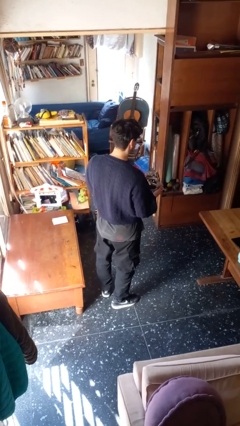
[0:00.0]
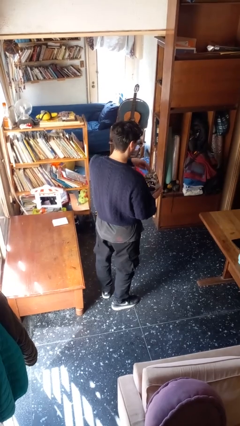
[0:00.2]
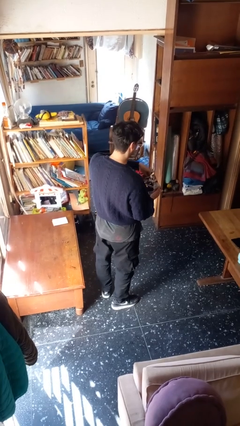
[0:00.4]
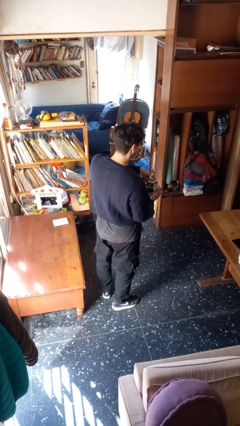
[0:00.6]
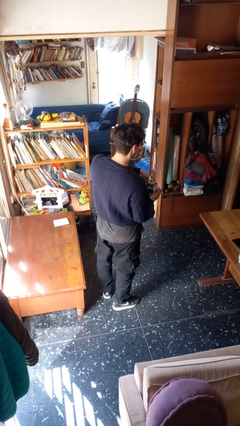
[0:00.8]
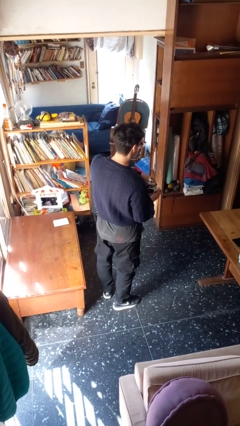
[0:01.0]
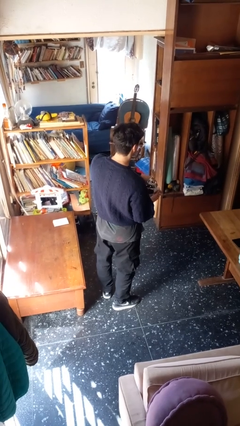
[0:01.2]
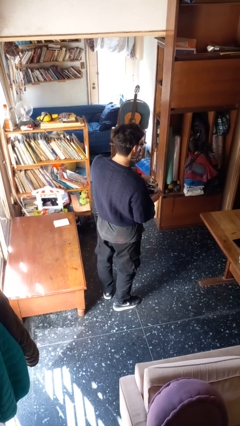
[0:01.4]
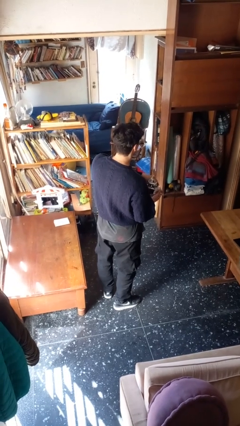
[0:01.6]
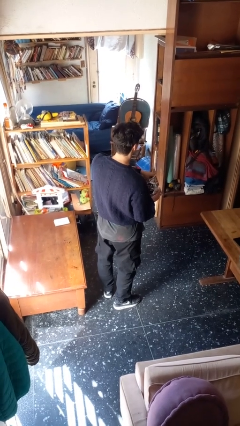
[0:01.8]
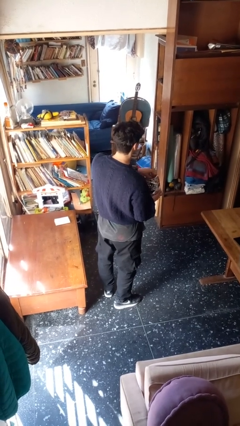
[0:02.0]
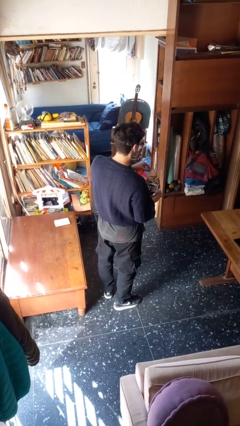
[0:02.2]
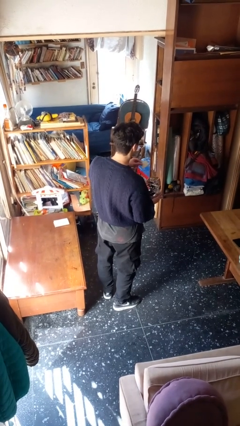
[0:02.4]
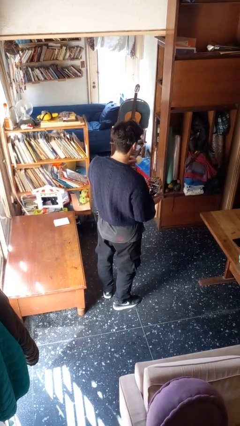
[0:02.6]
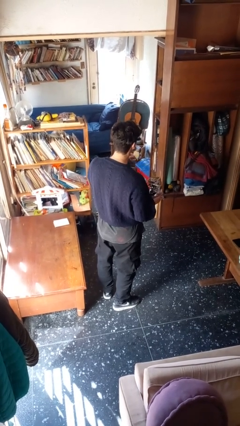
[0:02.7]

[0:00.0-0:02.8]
person eats snack from bag

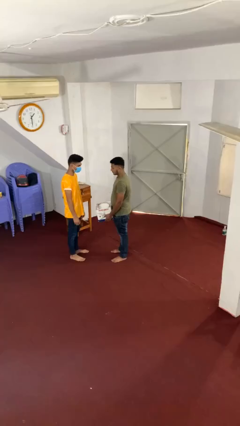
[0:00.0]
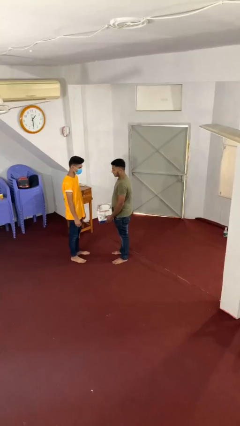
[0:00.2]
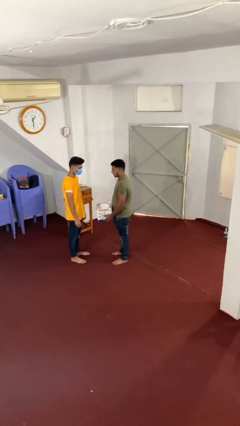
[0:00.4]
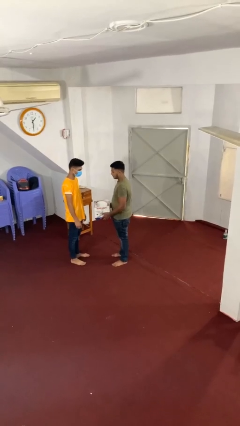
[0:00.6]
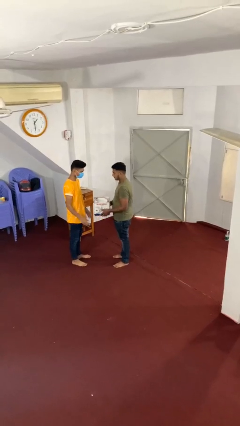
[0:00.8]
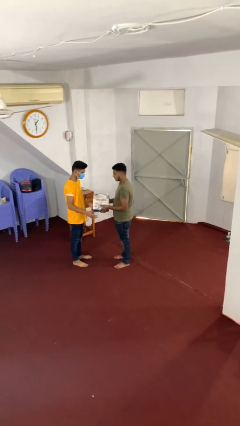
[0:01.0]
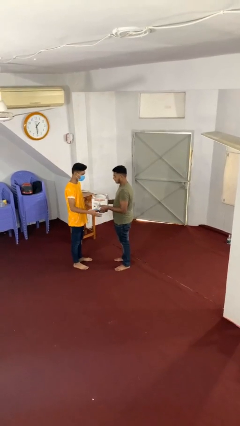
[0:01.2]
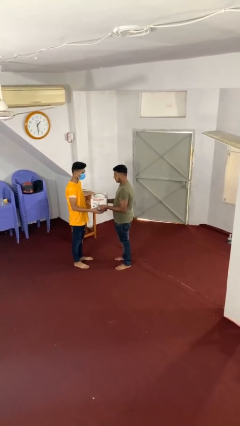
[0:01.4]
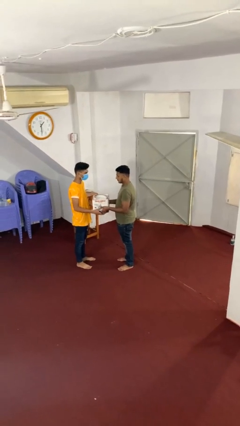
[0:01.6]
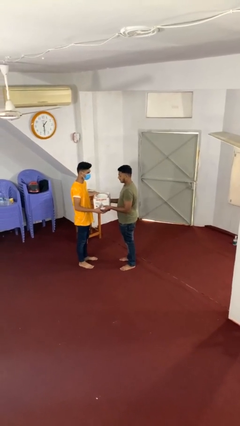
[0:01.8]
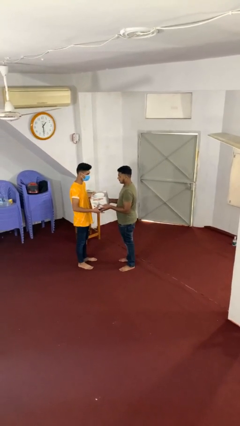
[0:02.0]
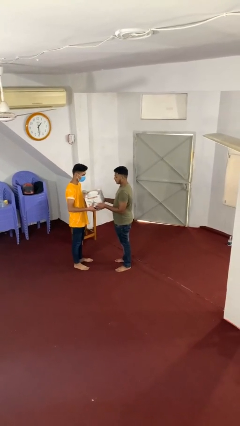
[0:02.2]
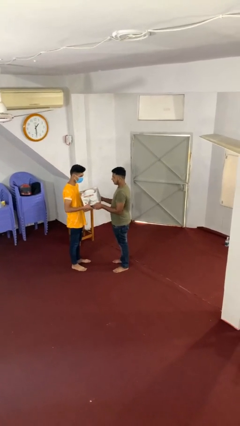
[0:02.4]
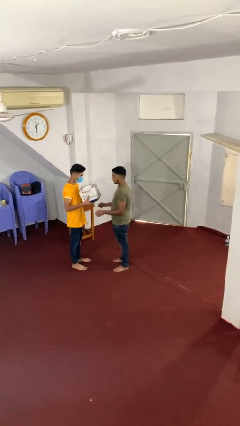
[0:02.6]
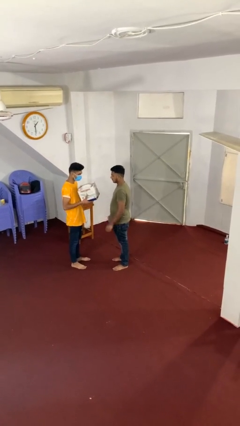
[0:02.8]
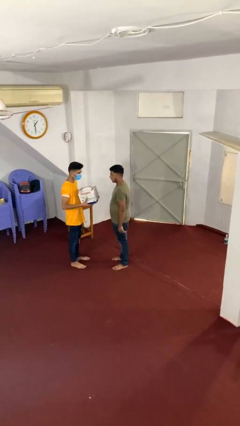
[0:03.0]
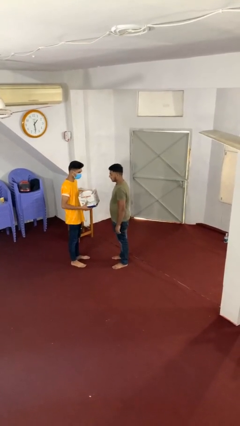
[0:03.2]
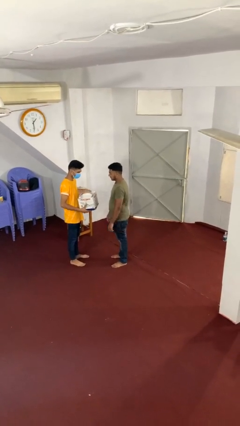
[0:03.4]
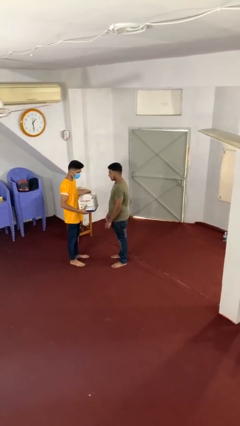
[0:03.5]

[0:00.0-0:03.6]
person transfers object to person

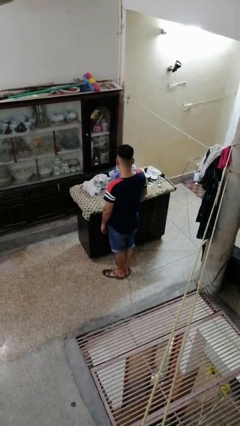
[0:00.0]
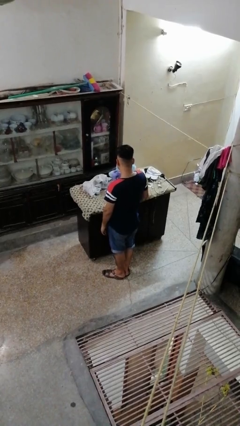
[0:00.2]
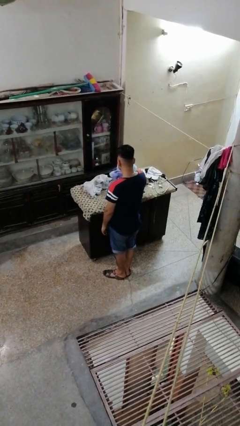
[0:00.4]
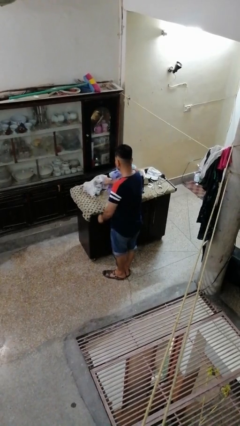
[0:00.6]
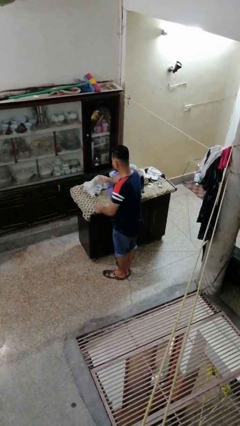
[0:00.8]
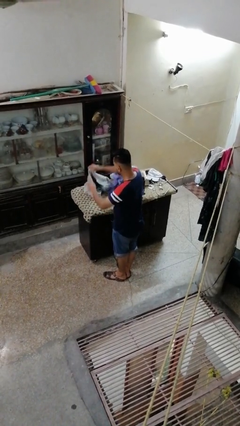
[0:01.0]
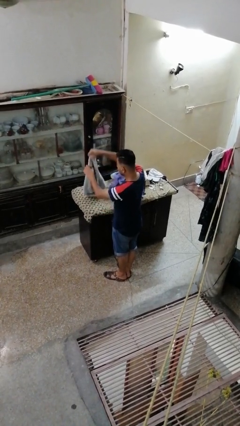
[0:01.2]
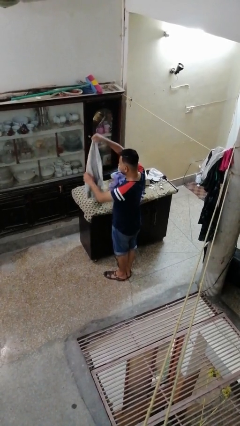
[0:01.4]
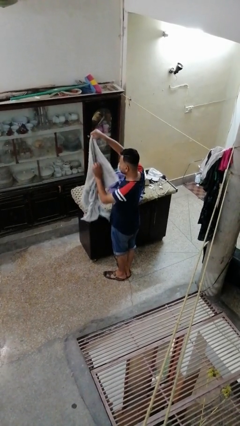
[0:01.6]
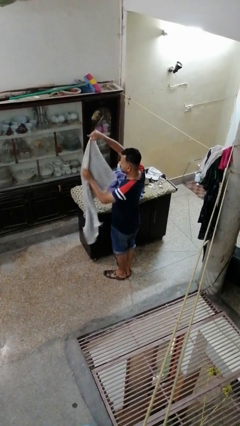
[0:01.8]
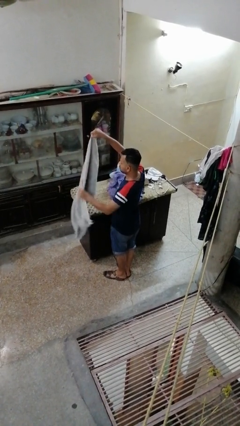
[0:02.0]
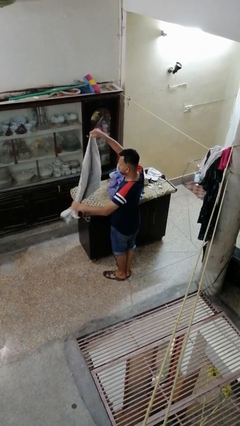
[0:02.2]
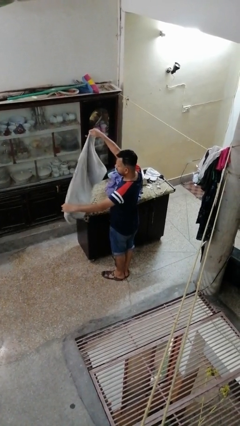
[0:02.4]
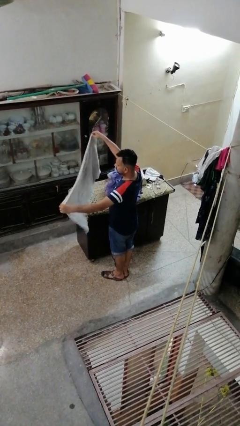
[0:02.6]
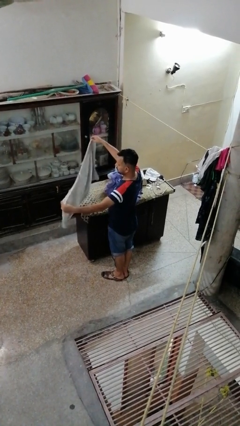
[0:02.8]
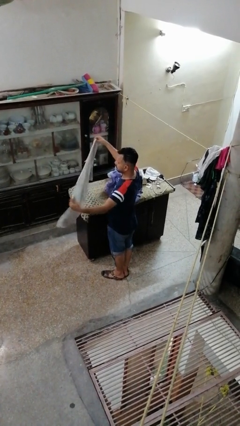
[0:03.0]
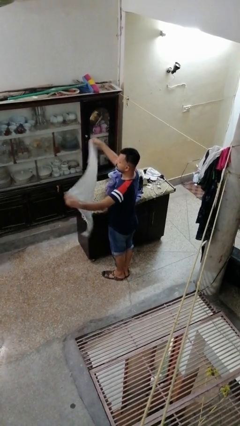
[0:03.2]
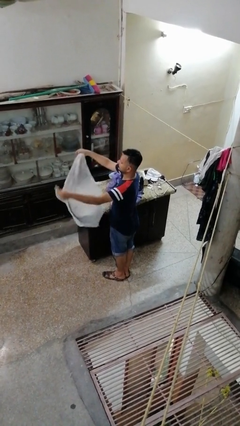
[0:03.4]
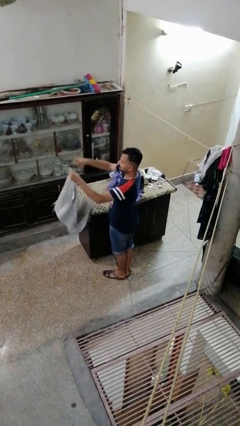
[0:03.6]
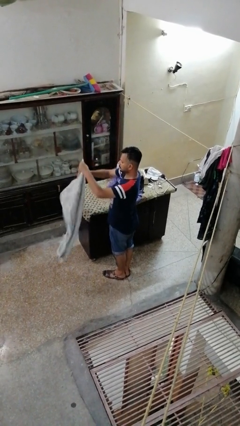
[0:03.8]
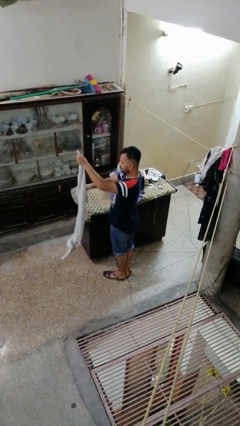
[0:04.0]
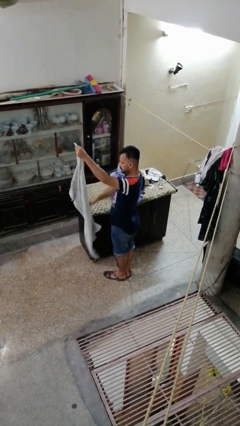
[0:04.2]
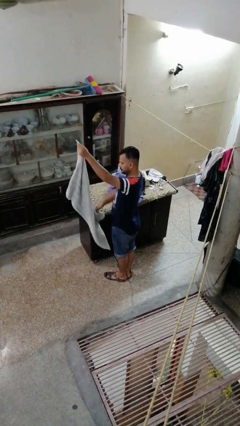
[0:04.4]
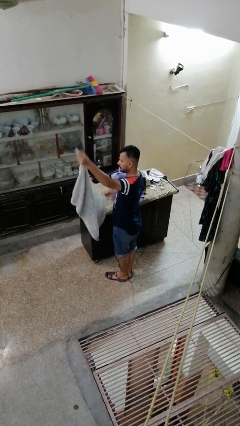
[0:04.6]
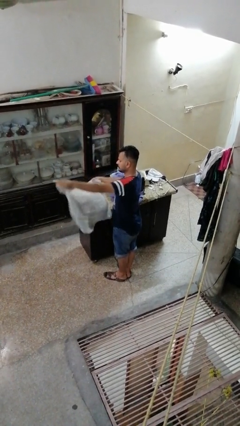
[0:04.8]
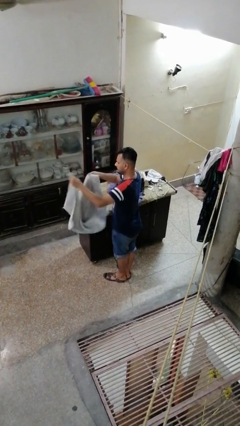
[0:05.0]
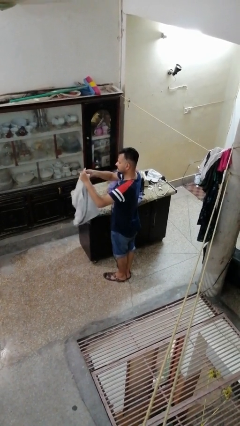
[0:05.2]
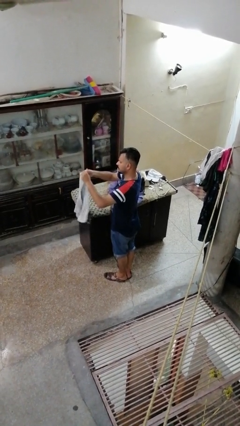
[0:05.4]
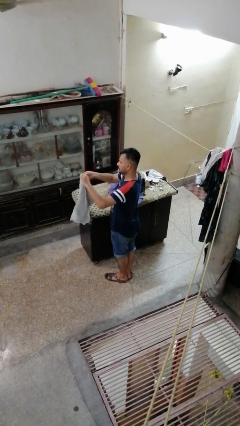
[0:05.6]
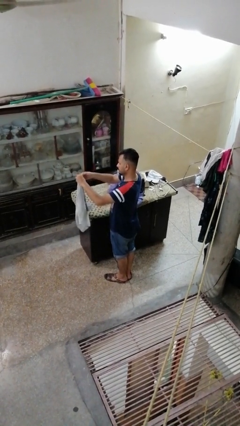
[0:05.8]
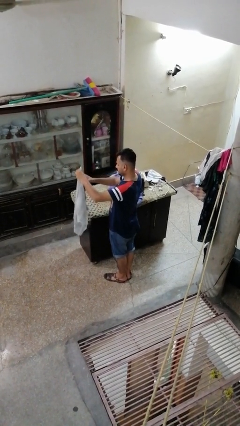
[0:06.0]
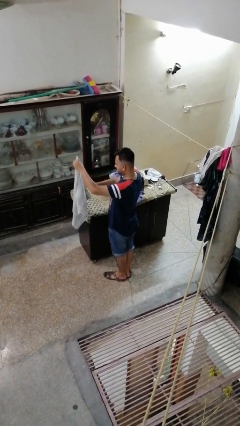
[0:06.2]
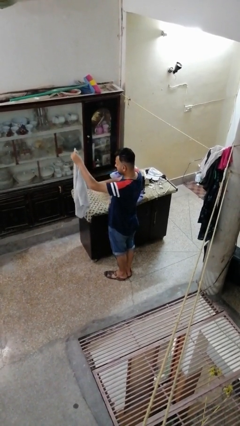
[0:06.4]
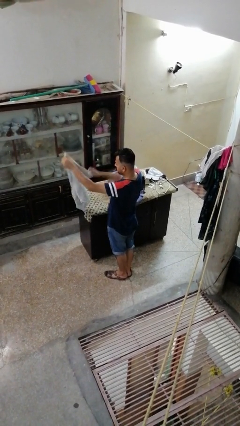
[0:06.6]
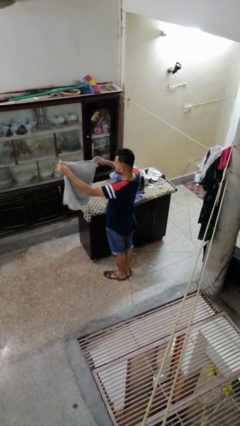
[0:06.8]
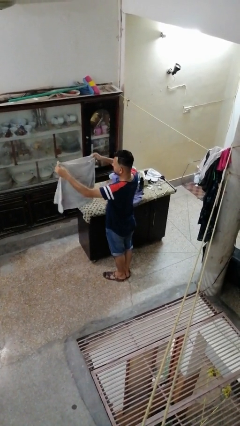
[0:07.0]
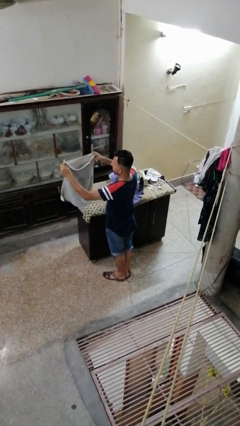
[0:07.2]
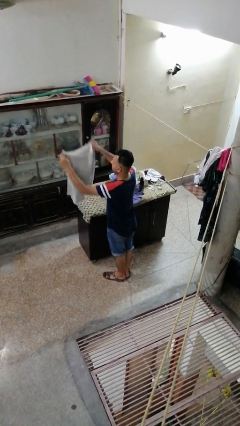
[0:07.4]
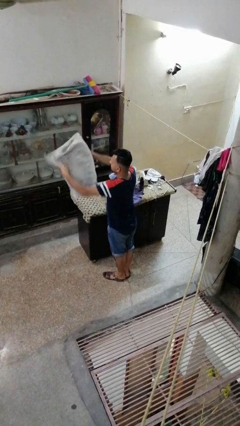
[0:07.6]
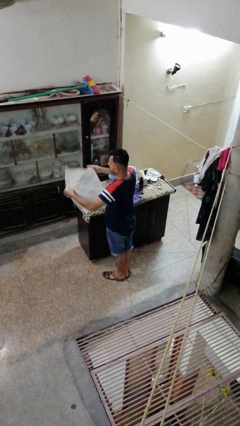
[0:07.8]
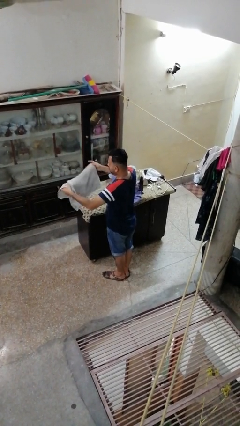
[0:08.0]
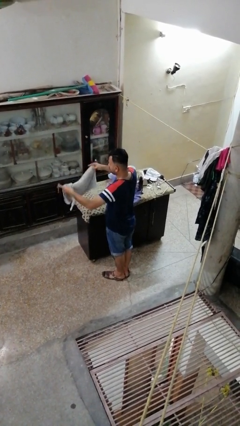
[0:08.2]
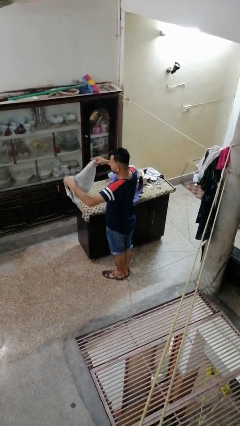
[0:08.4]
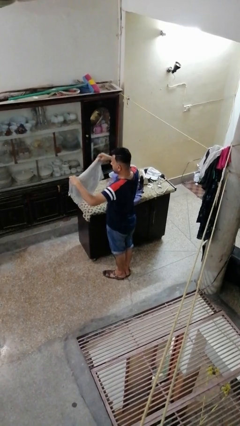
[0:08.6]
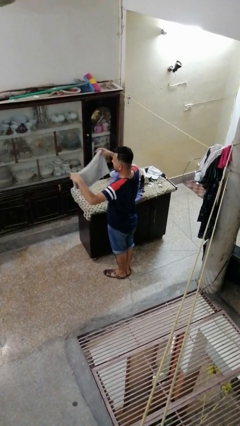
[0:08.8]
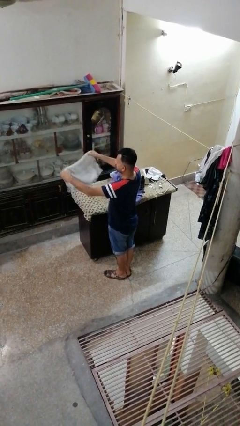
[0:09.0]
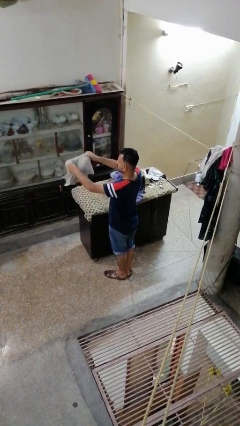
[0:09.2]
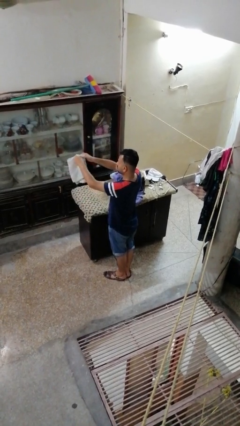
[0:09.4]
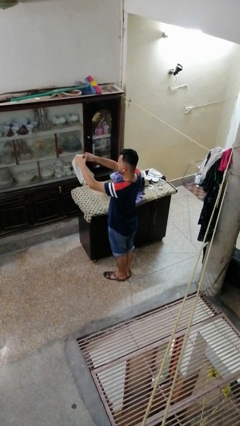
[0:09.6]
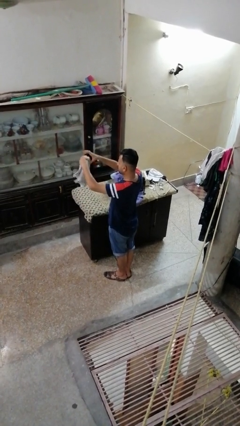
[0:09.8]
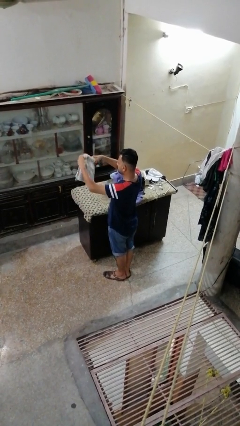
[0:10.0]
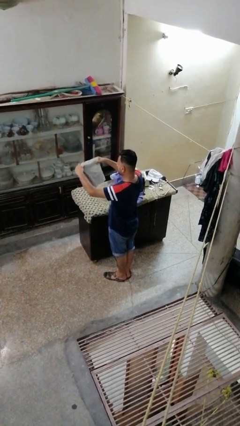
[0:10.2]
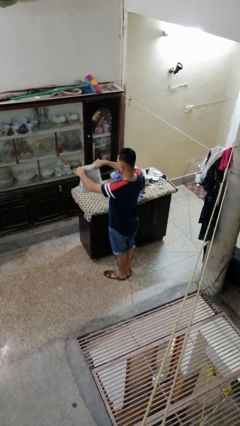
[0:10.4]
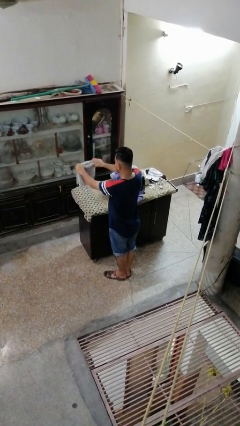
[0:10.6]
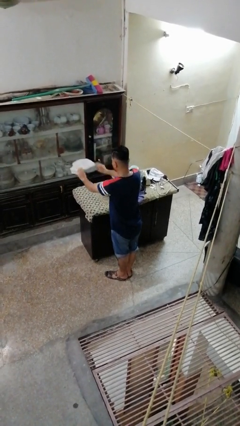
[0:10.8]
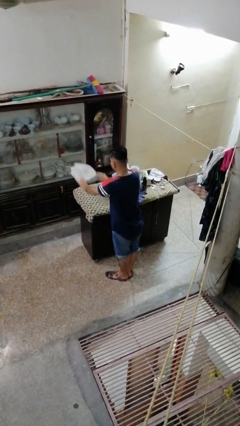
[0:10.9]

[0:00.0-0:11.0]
person folds towel

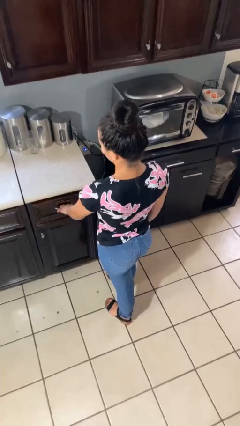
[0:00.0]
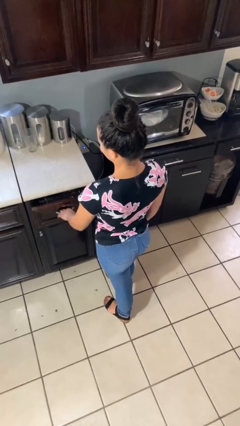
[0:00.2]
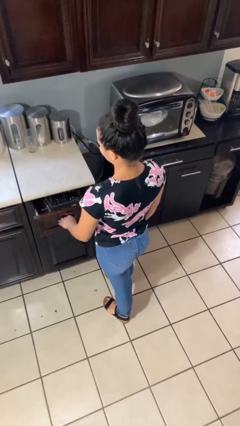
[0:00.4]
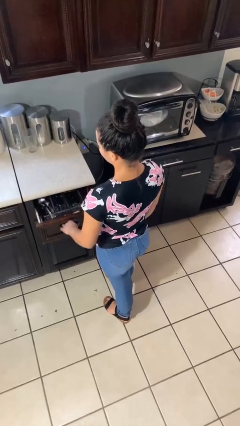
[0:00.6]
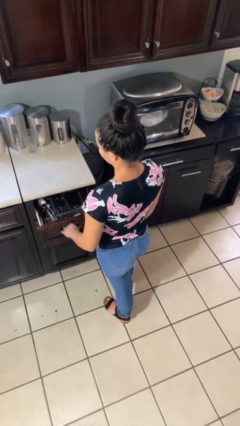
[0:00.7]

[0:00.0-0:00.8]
person opens kitchen drawer
